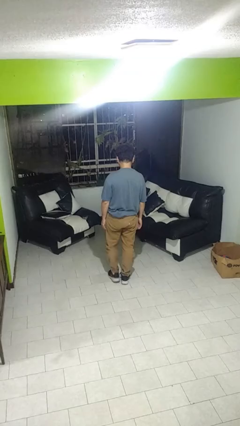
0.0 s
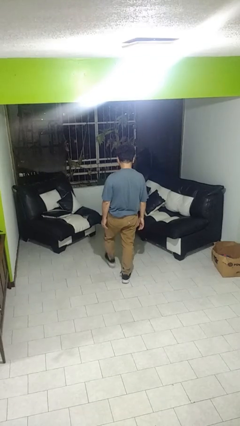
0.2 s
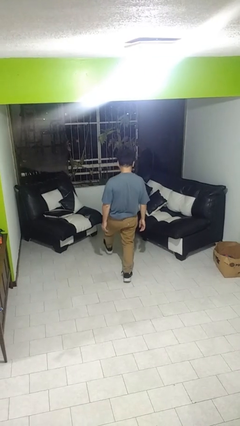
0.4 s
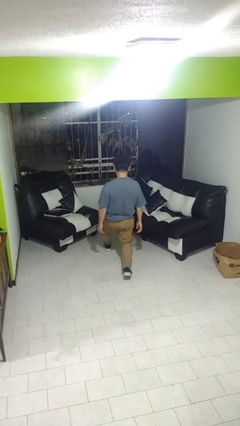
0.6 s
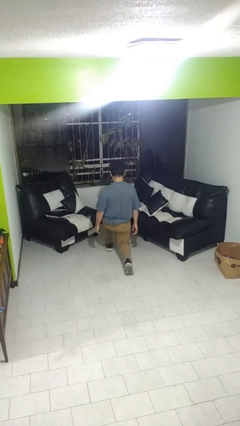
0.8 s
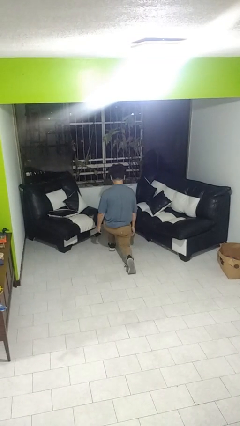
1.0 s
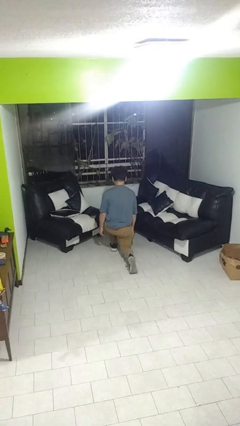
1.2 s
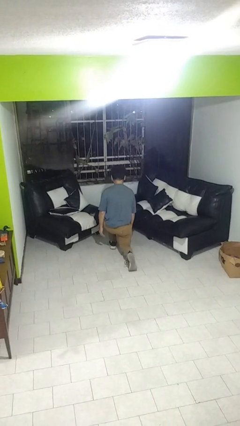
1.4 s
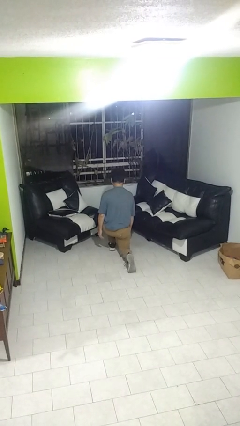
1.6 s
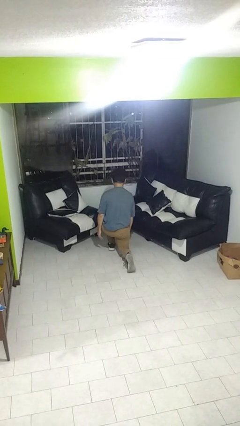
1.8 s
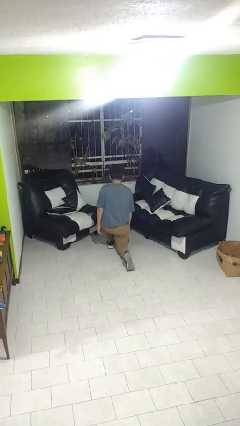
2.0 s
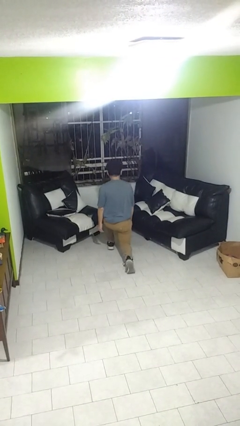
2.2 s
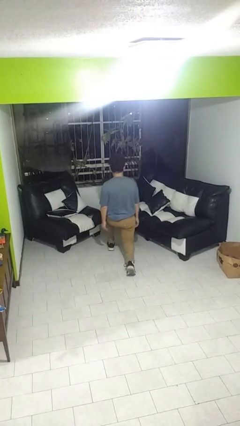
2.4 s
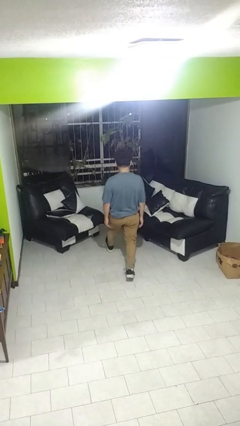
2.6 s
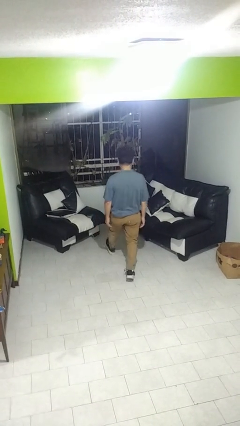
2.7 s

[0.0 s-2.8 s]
person exercises with lunges

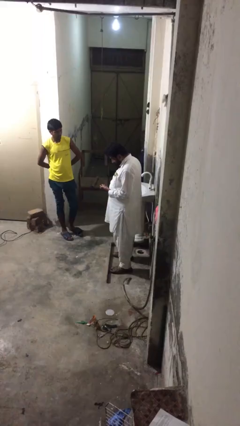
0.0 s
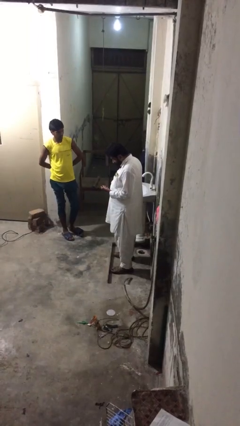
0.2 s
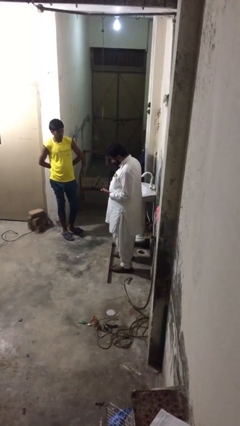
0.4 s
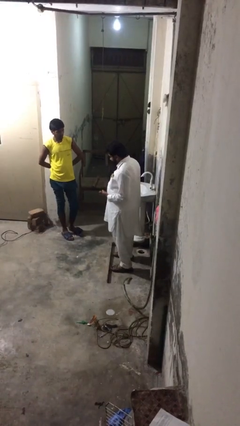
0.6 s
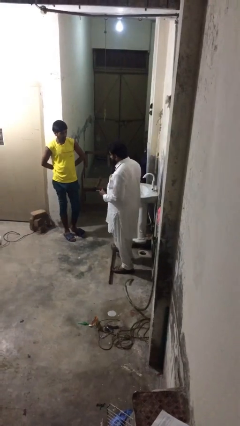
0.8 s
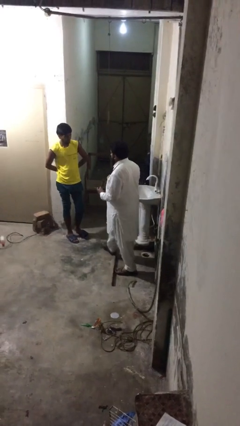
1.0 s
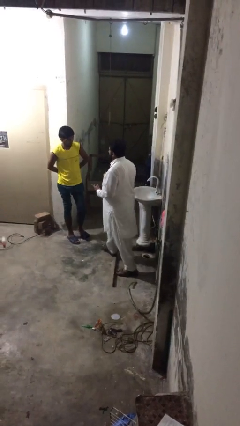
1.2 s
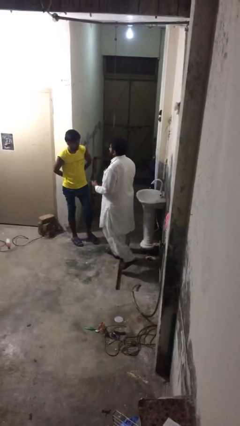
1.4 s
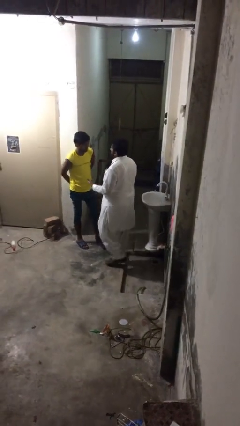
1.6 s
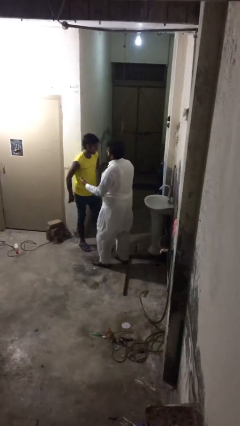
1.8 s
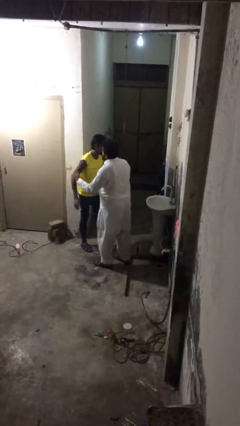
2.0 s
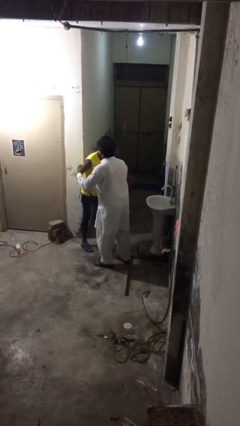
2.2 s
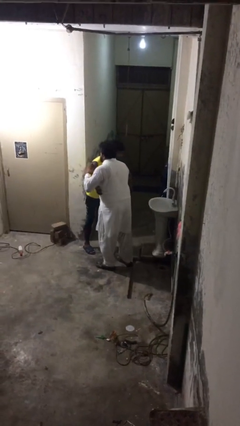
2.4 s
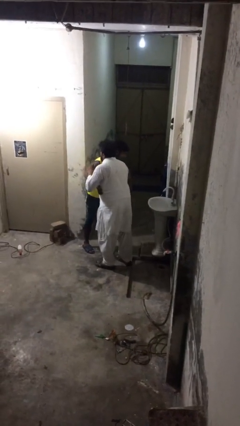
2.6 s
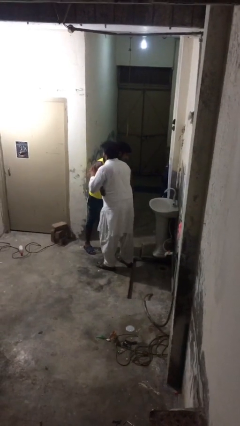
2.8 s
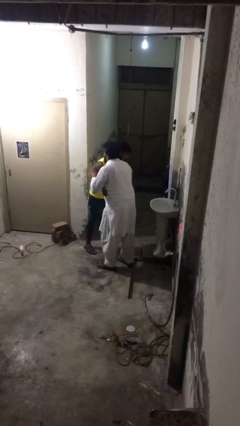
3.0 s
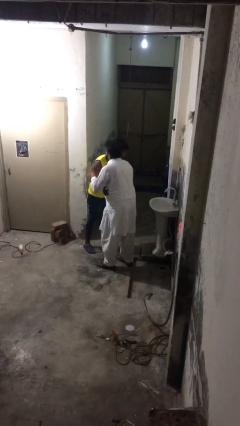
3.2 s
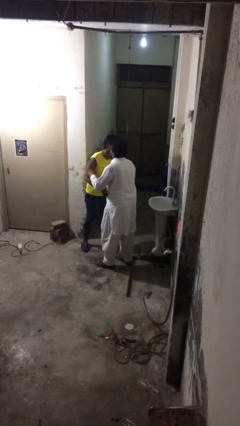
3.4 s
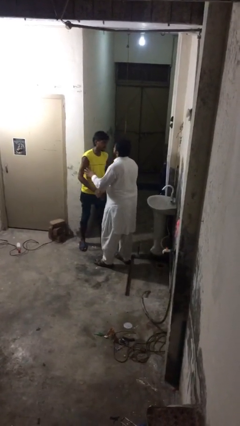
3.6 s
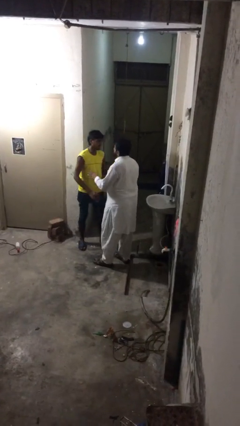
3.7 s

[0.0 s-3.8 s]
person embraces person

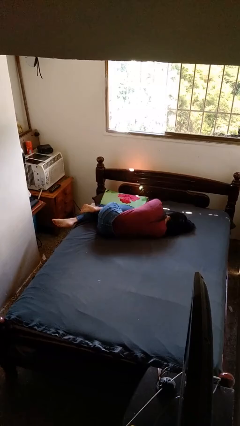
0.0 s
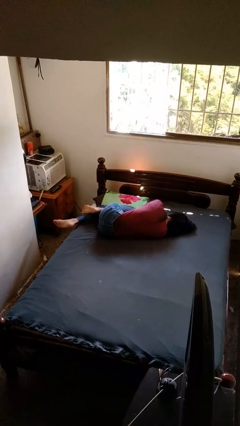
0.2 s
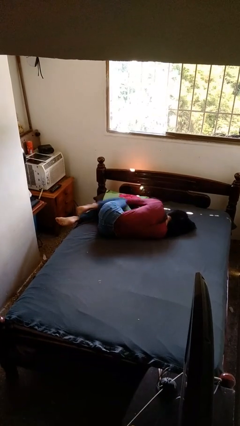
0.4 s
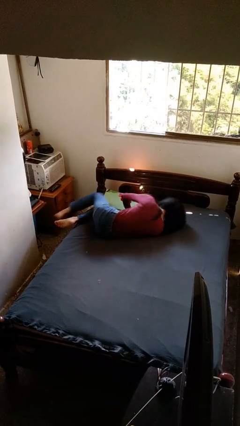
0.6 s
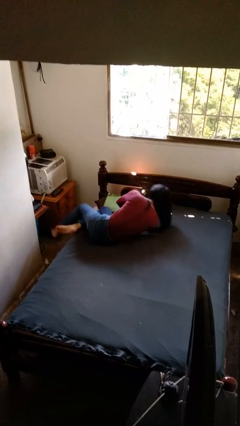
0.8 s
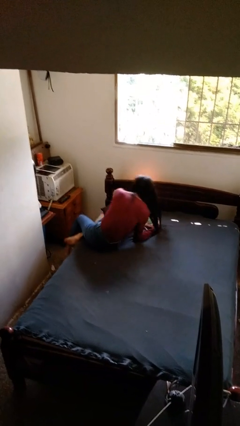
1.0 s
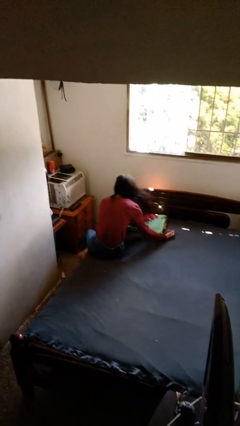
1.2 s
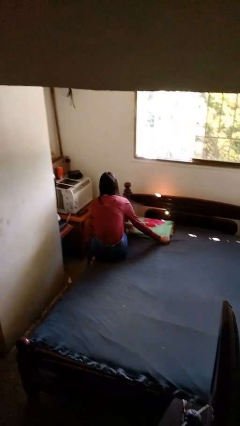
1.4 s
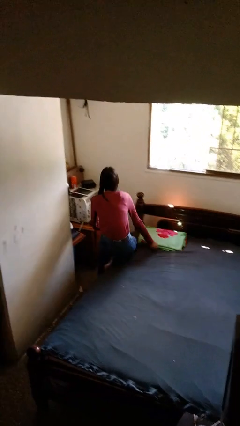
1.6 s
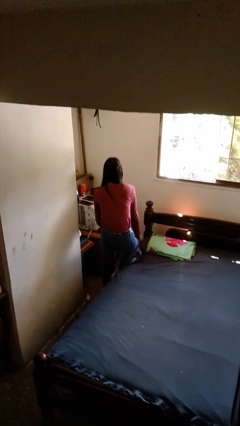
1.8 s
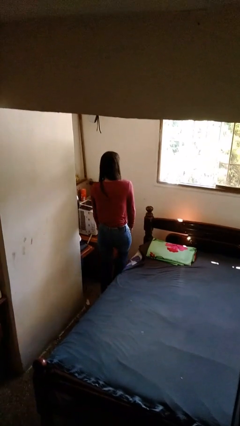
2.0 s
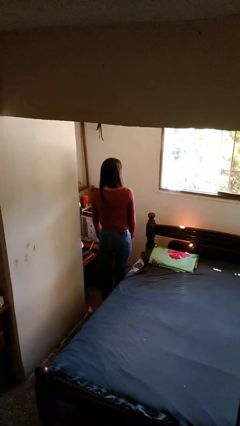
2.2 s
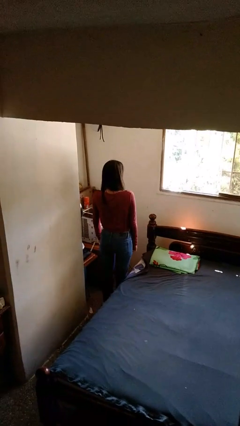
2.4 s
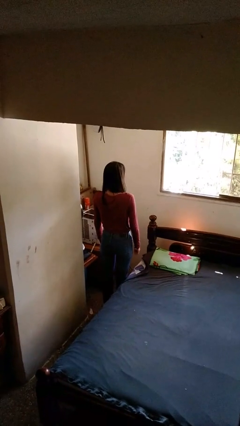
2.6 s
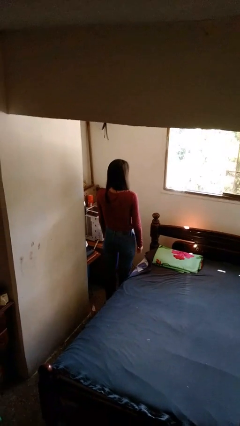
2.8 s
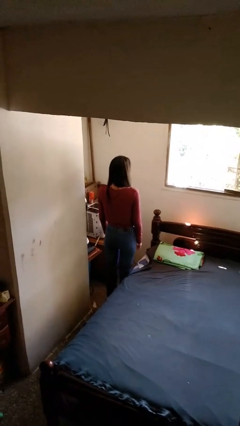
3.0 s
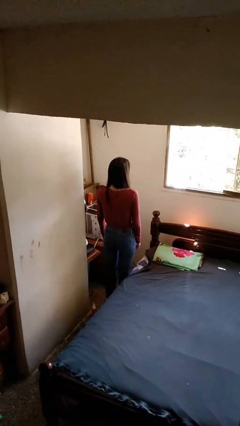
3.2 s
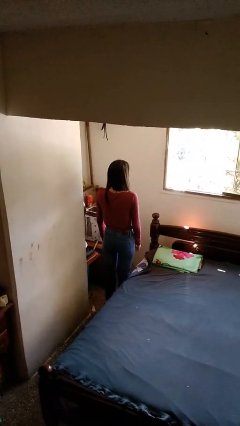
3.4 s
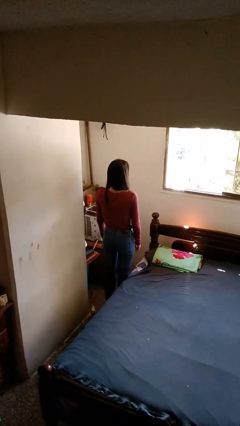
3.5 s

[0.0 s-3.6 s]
person stands up

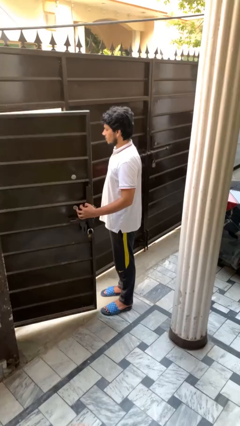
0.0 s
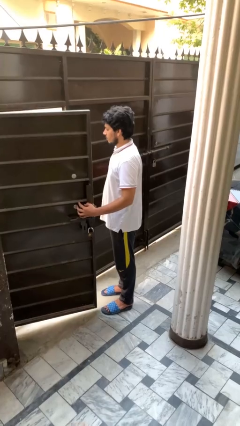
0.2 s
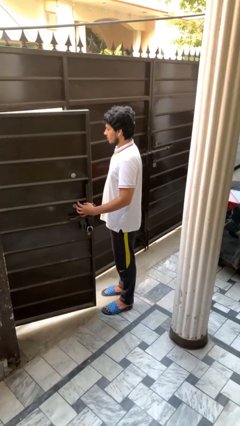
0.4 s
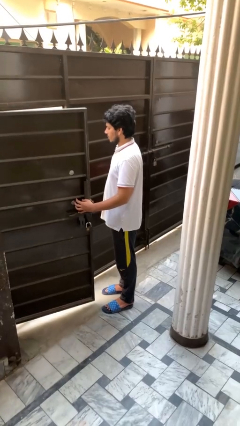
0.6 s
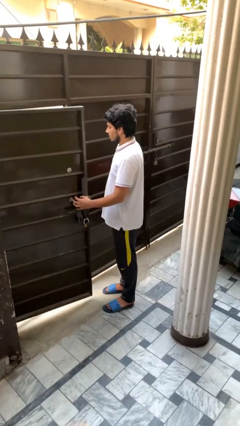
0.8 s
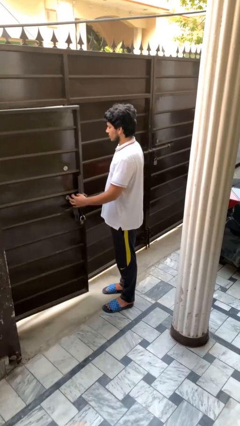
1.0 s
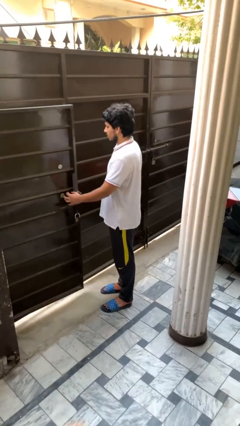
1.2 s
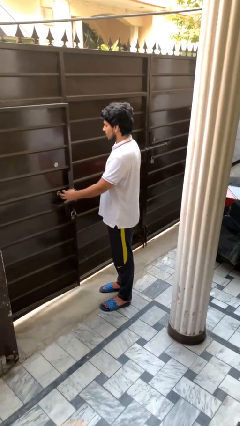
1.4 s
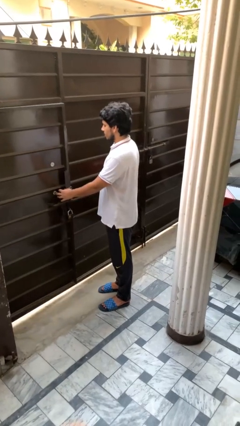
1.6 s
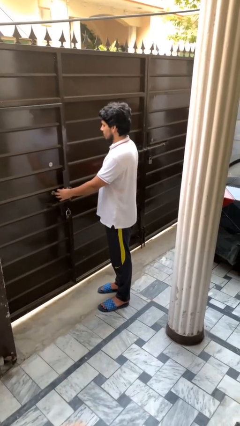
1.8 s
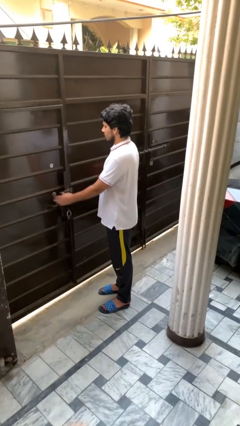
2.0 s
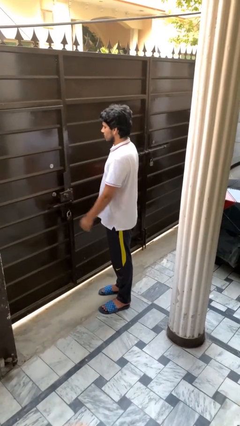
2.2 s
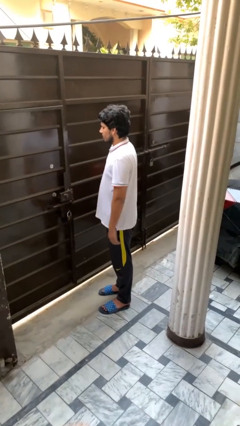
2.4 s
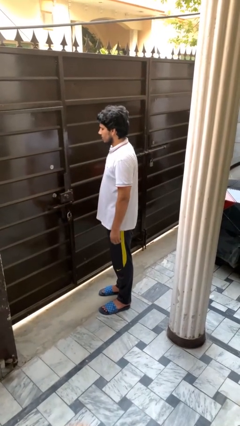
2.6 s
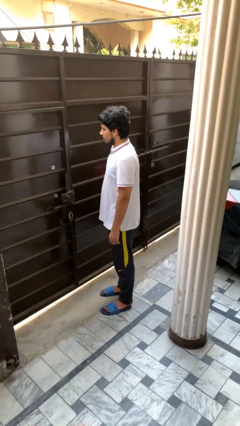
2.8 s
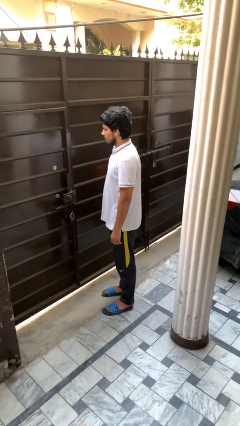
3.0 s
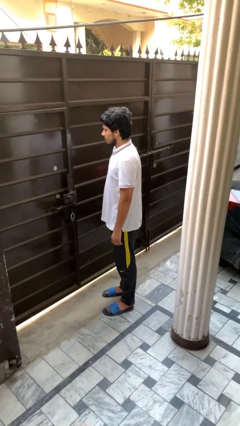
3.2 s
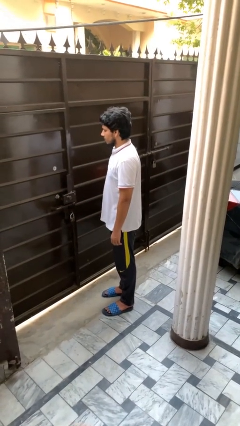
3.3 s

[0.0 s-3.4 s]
person closes gate

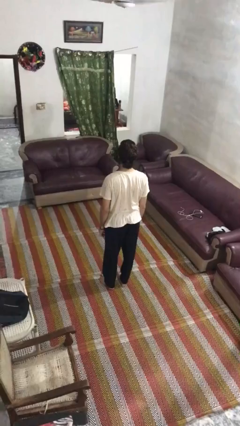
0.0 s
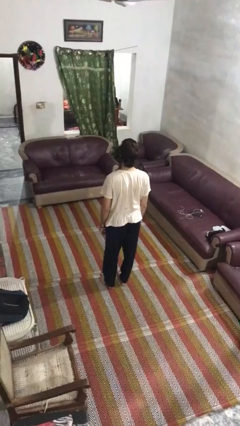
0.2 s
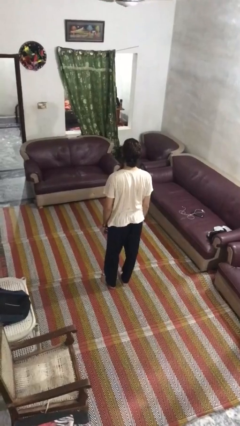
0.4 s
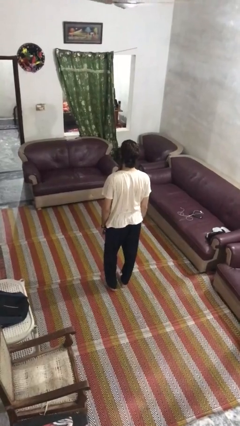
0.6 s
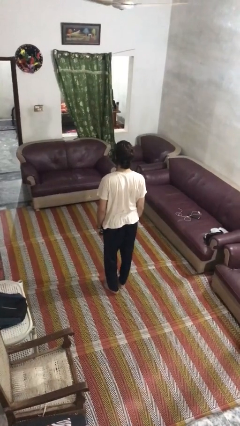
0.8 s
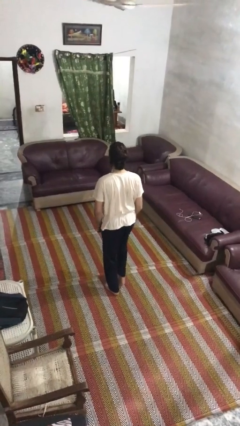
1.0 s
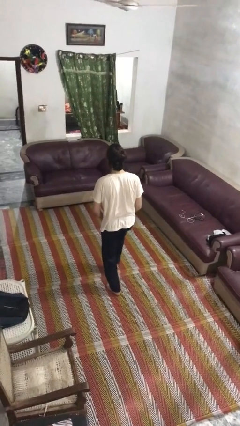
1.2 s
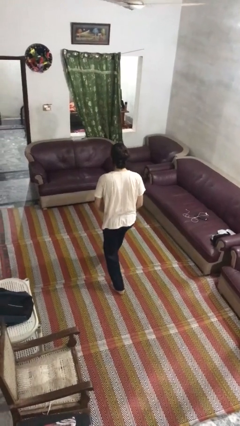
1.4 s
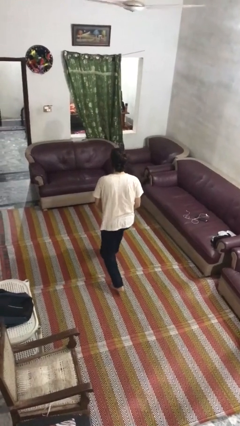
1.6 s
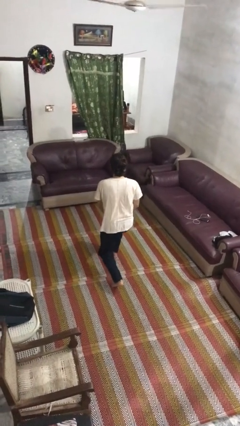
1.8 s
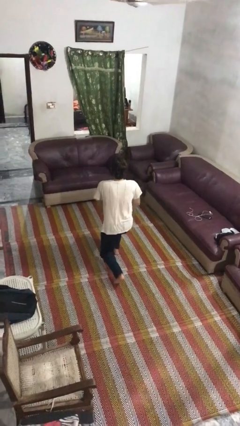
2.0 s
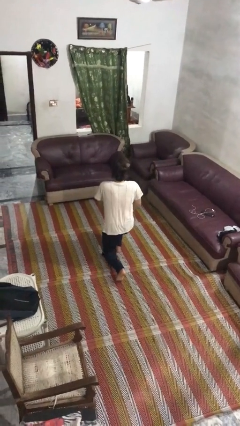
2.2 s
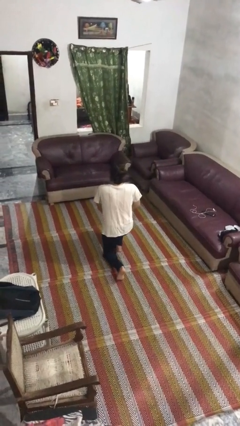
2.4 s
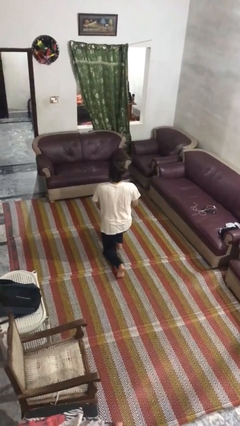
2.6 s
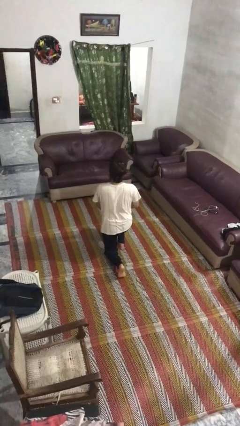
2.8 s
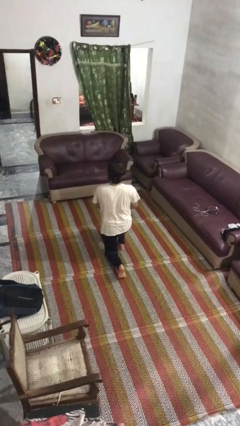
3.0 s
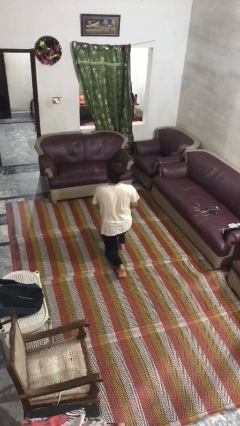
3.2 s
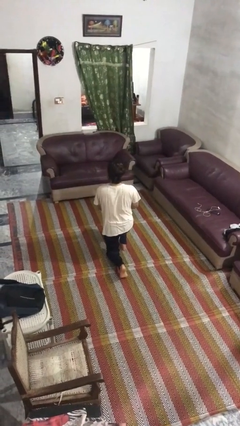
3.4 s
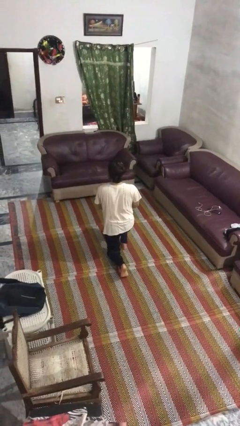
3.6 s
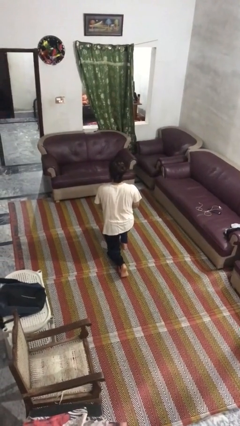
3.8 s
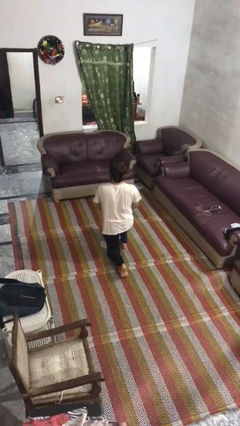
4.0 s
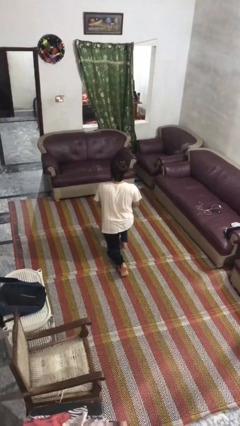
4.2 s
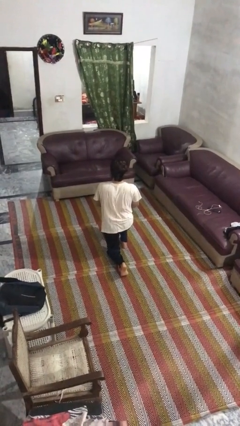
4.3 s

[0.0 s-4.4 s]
person kneels
